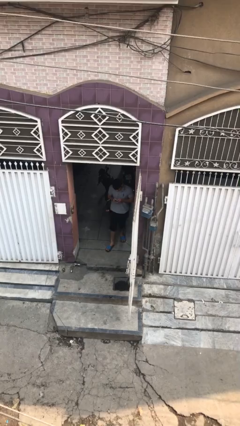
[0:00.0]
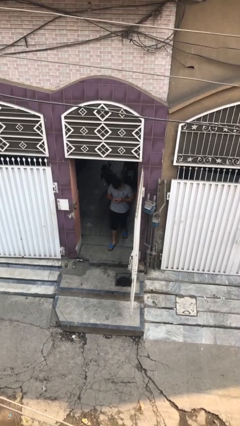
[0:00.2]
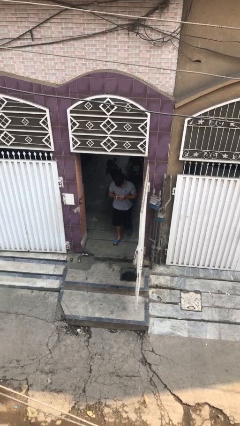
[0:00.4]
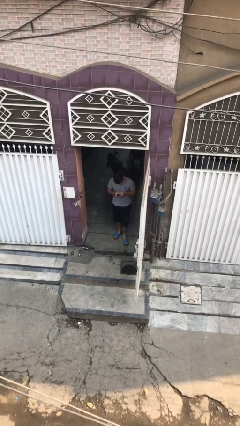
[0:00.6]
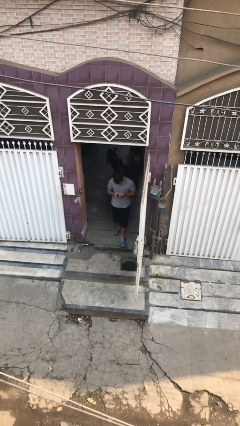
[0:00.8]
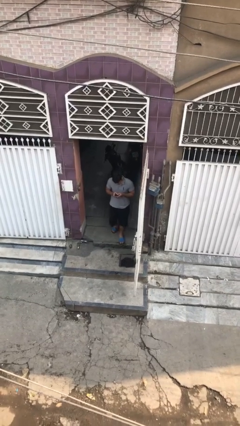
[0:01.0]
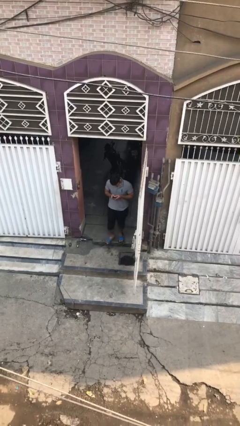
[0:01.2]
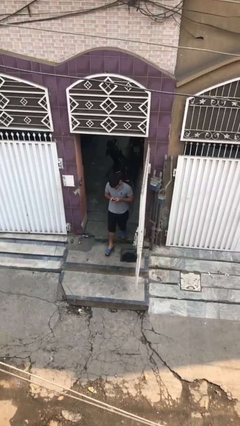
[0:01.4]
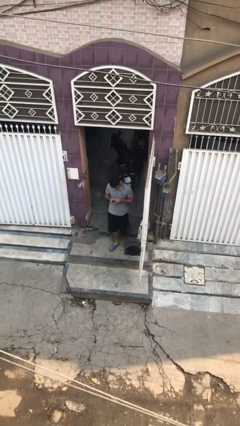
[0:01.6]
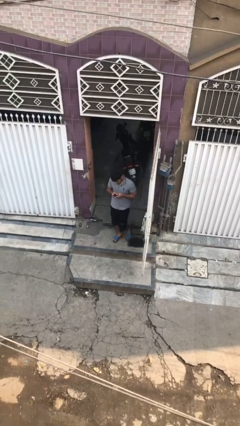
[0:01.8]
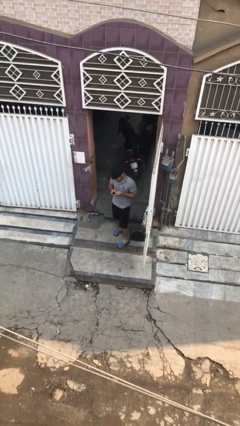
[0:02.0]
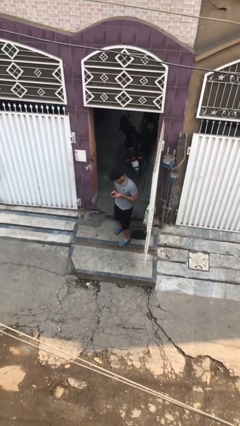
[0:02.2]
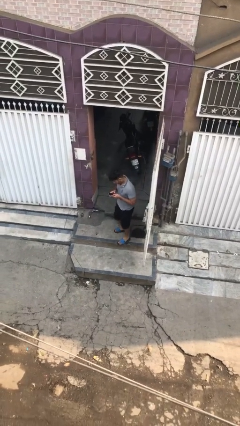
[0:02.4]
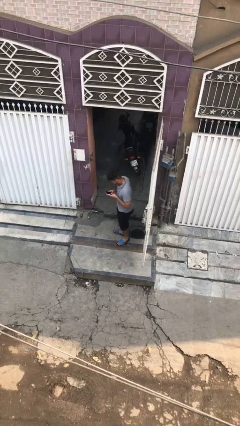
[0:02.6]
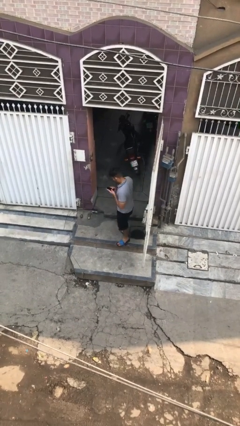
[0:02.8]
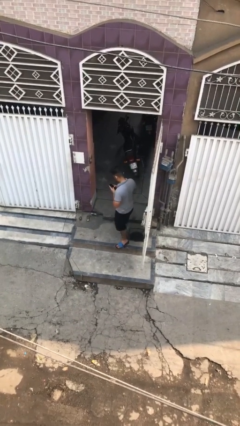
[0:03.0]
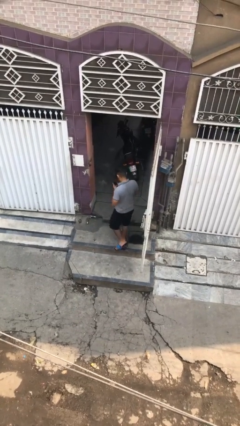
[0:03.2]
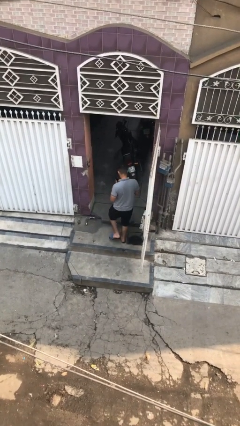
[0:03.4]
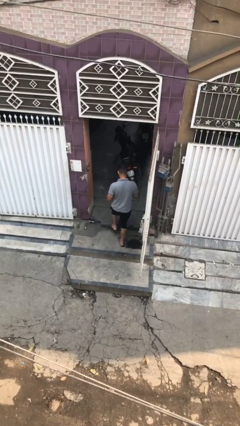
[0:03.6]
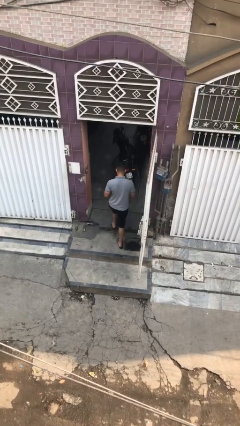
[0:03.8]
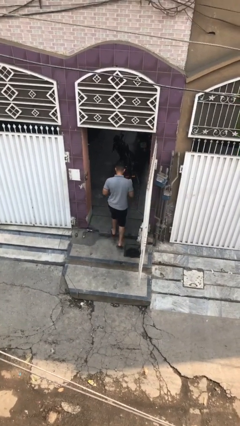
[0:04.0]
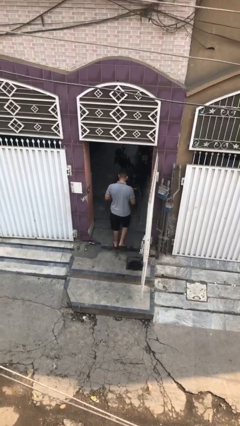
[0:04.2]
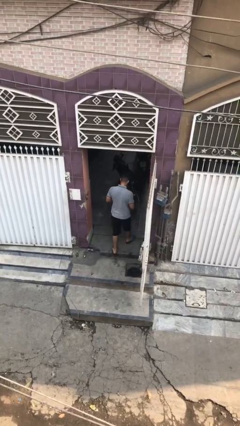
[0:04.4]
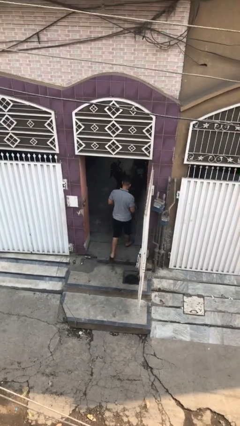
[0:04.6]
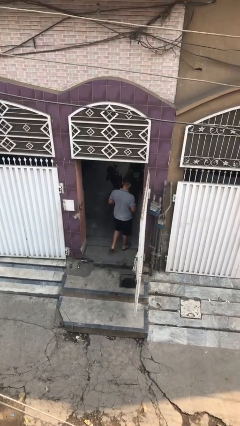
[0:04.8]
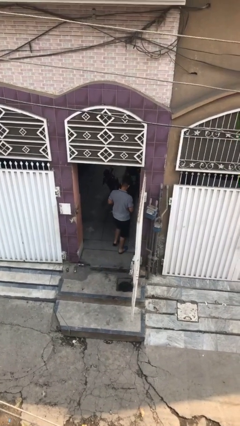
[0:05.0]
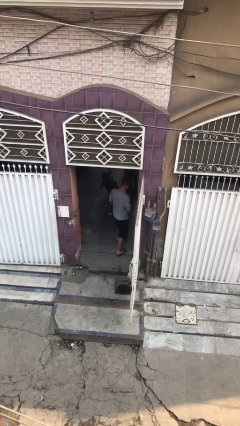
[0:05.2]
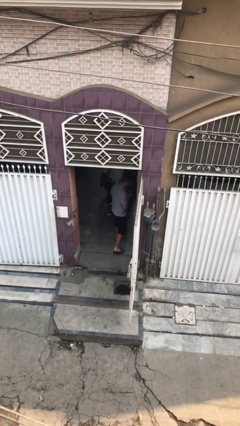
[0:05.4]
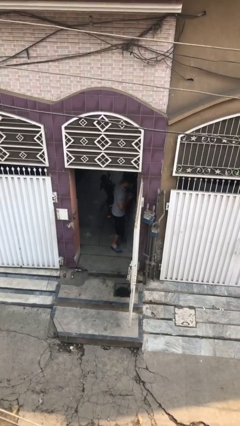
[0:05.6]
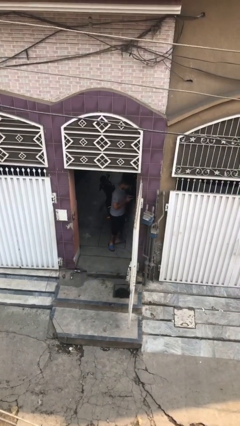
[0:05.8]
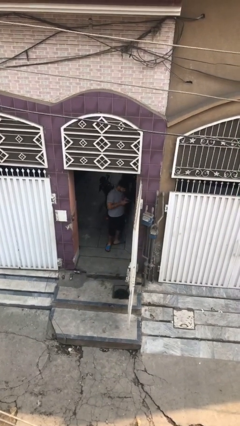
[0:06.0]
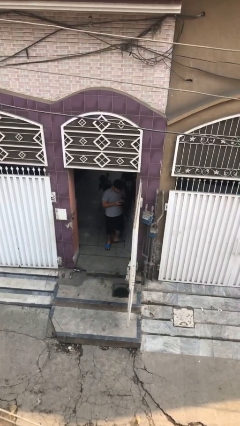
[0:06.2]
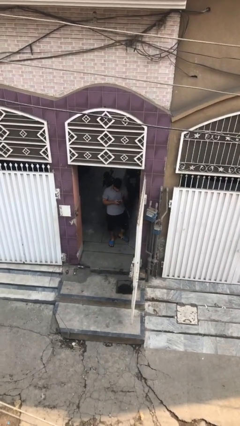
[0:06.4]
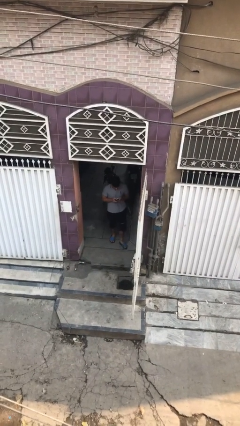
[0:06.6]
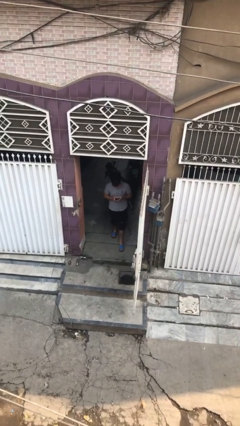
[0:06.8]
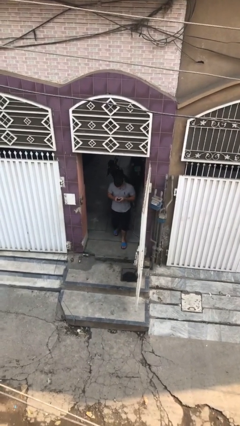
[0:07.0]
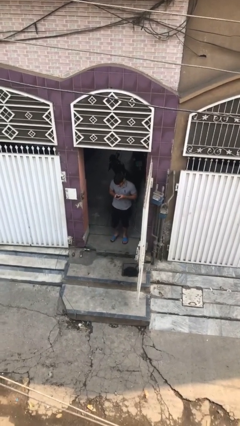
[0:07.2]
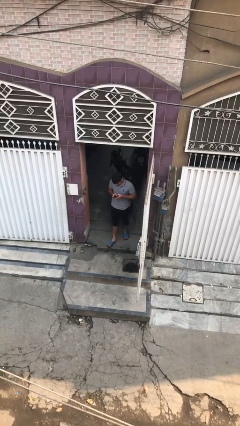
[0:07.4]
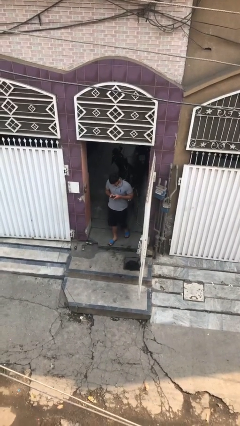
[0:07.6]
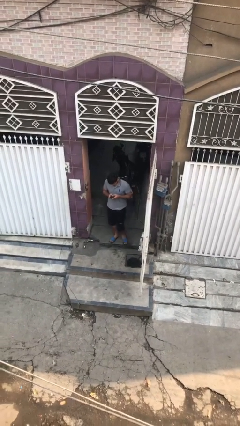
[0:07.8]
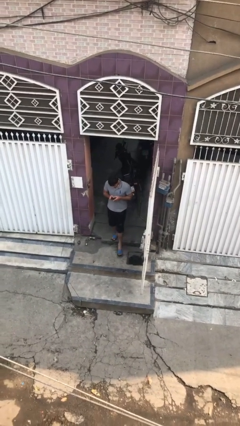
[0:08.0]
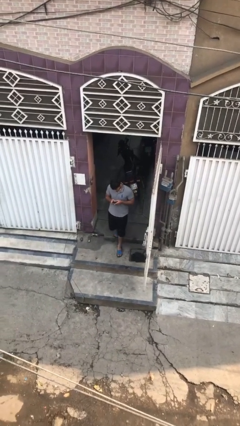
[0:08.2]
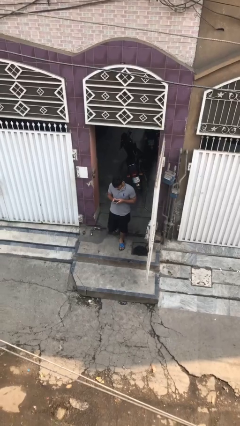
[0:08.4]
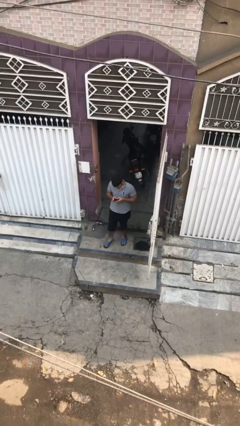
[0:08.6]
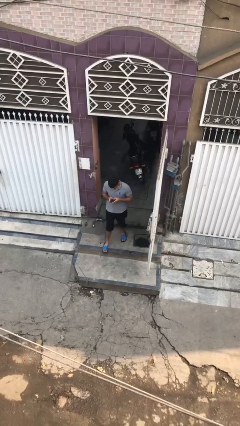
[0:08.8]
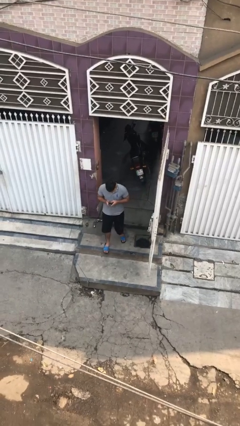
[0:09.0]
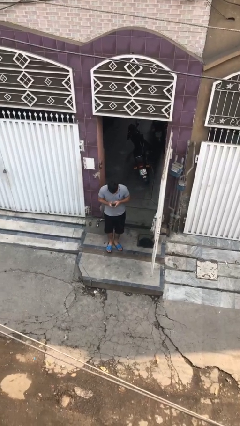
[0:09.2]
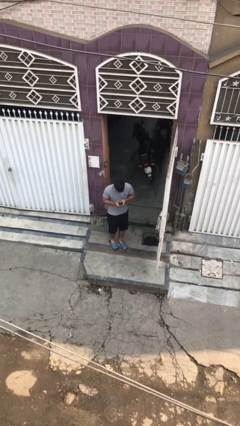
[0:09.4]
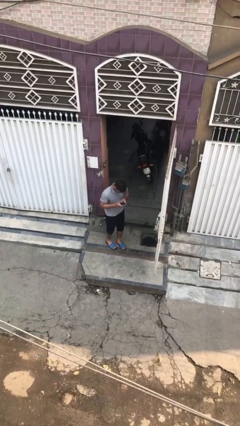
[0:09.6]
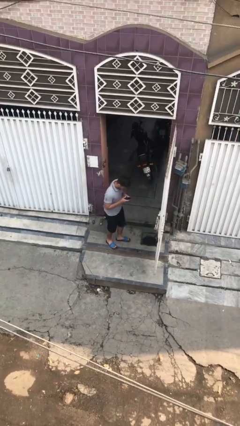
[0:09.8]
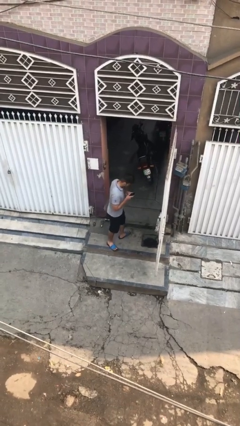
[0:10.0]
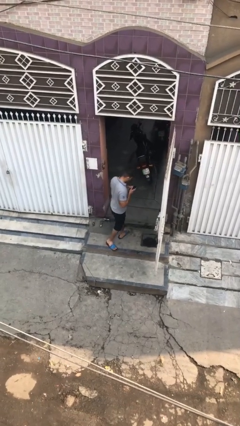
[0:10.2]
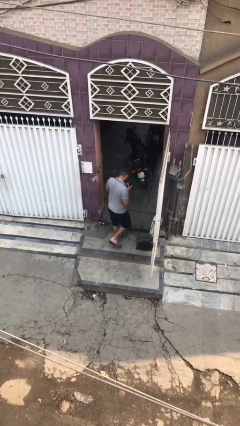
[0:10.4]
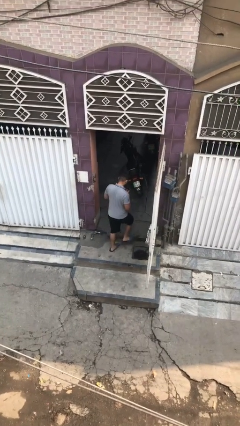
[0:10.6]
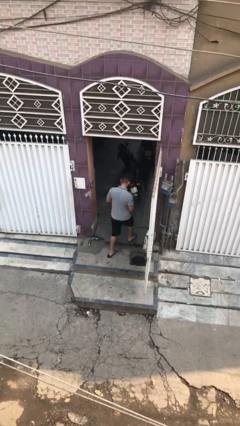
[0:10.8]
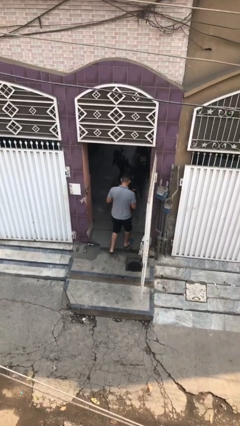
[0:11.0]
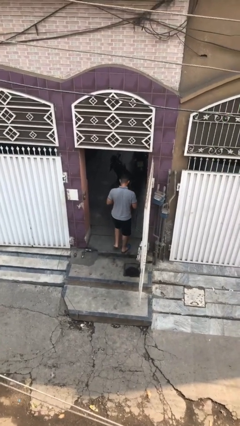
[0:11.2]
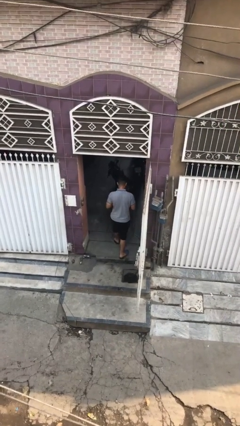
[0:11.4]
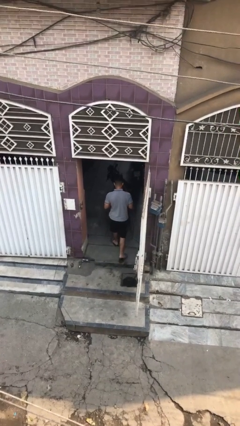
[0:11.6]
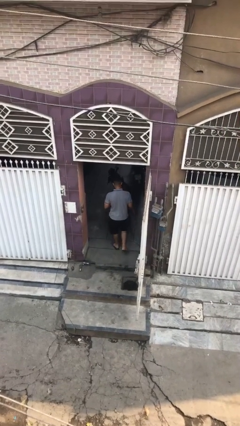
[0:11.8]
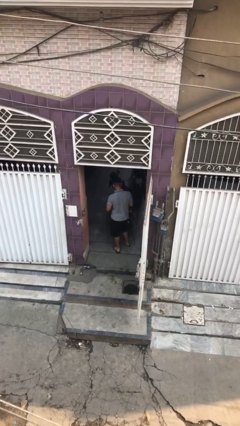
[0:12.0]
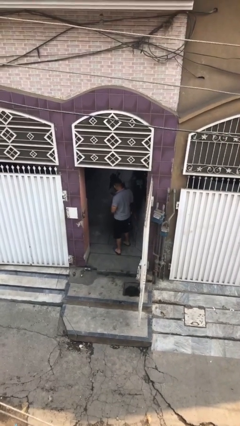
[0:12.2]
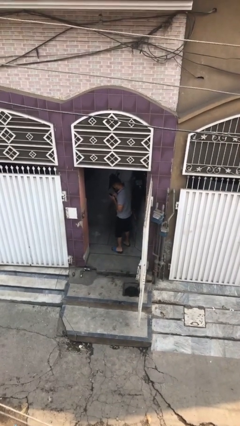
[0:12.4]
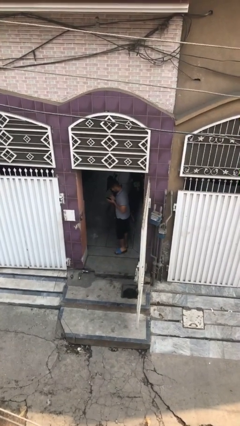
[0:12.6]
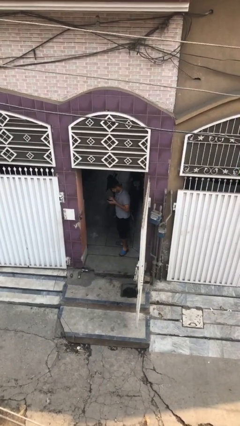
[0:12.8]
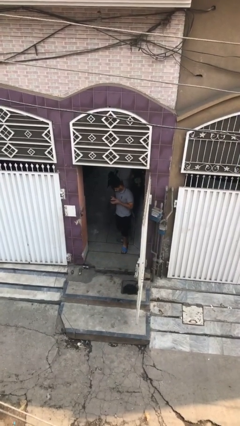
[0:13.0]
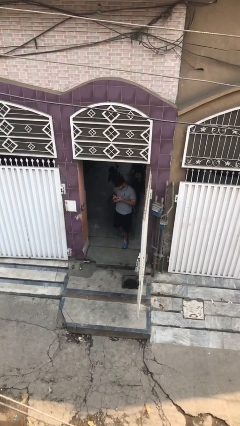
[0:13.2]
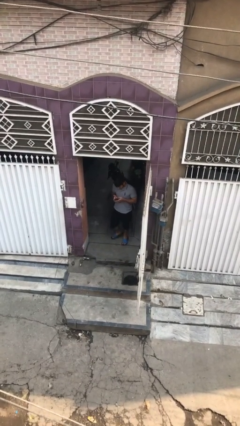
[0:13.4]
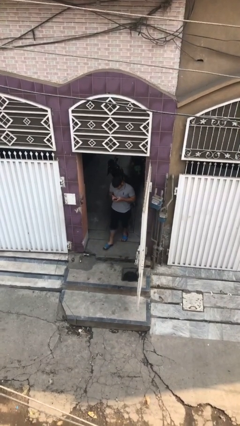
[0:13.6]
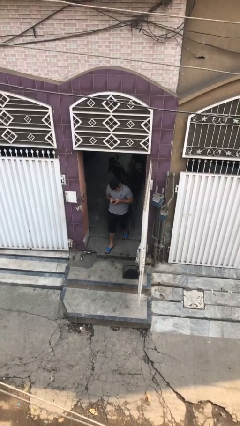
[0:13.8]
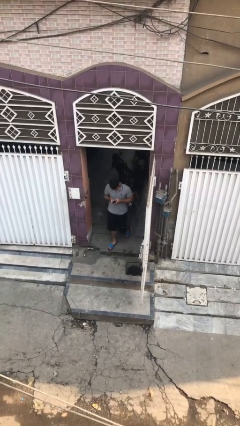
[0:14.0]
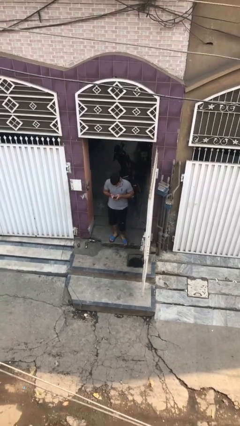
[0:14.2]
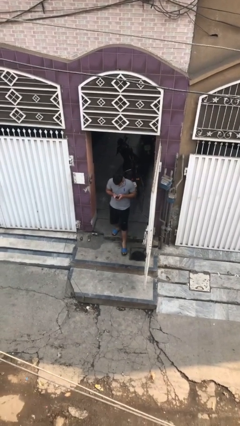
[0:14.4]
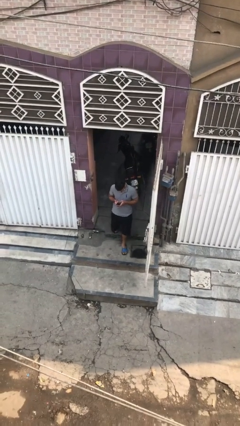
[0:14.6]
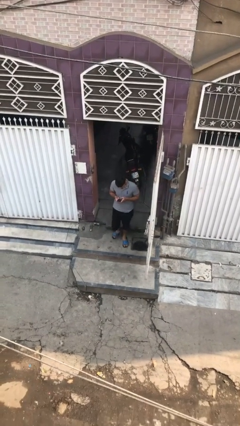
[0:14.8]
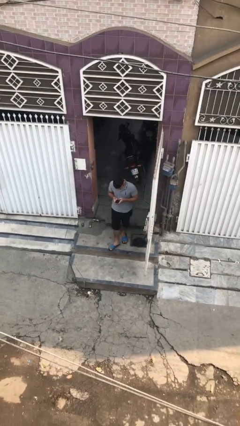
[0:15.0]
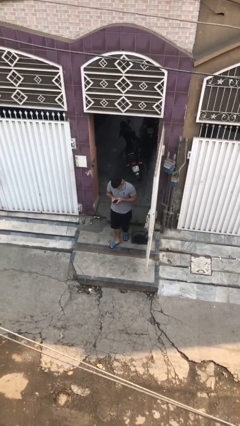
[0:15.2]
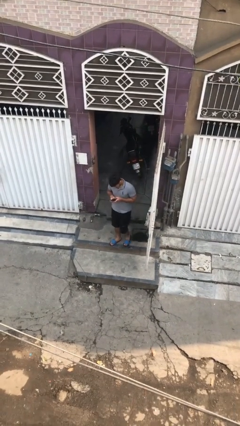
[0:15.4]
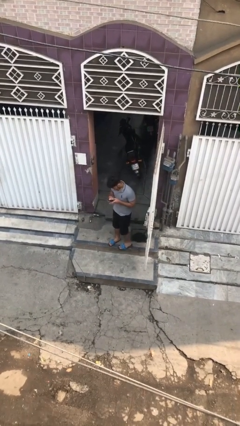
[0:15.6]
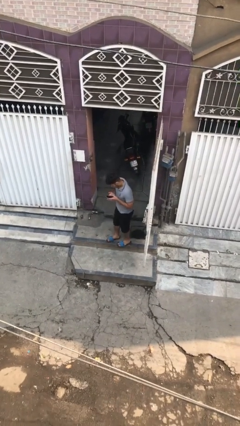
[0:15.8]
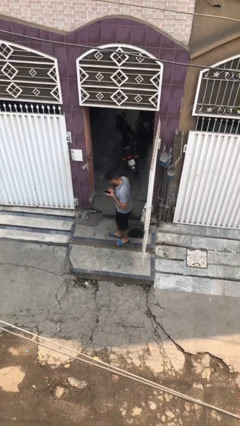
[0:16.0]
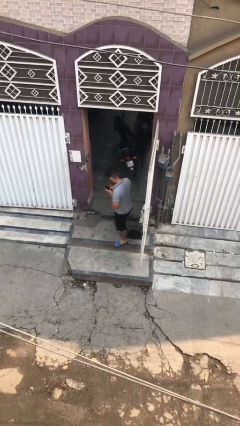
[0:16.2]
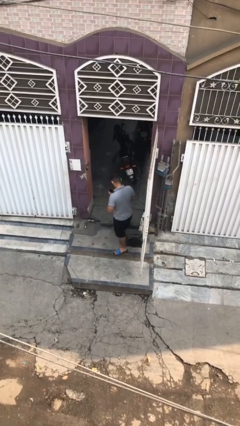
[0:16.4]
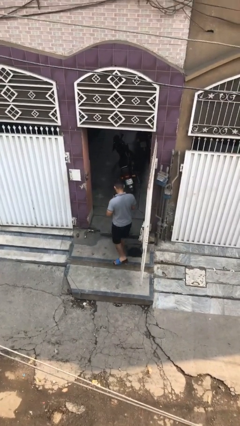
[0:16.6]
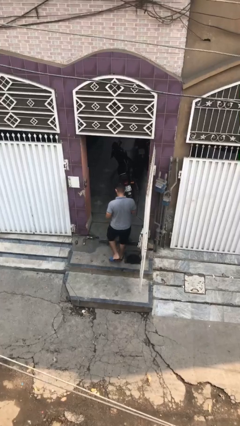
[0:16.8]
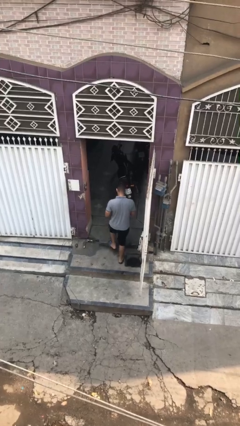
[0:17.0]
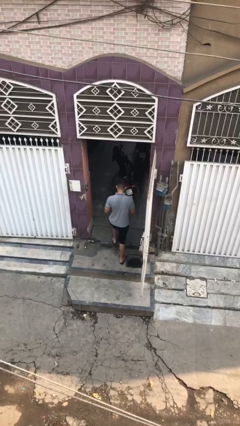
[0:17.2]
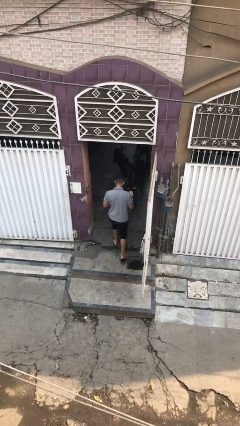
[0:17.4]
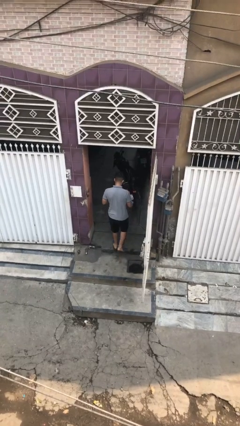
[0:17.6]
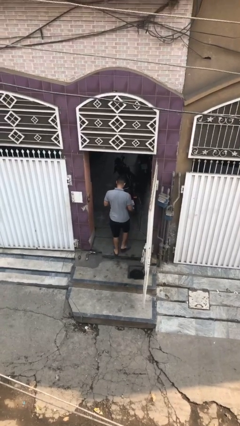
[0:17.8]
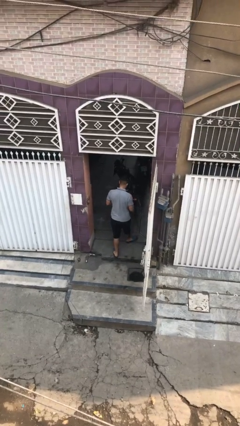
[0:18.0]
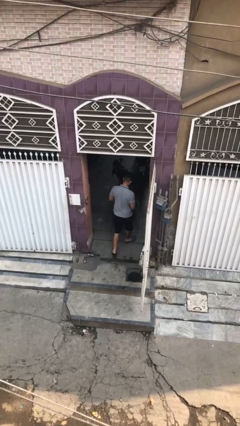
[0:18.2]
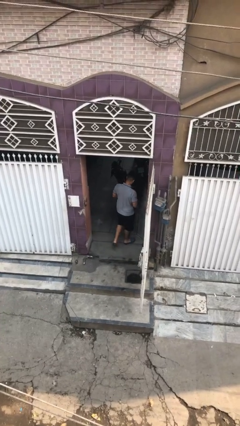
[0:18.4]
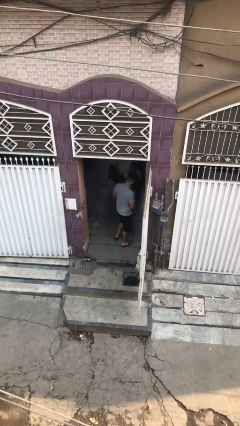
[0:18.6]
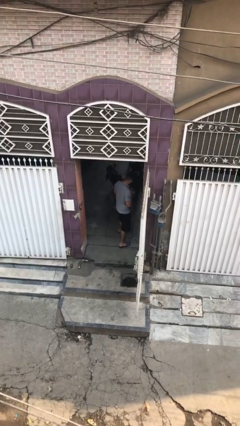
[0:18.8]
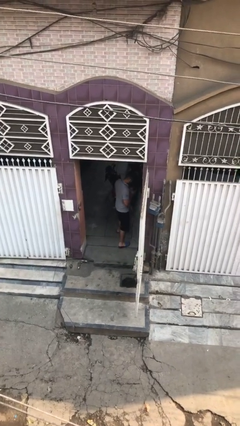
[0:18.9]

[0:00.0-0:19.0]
person texts on phone
